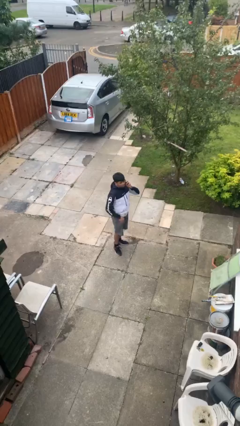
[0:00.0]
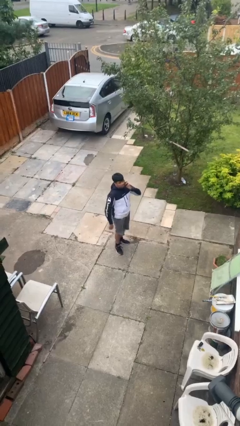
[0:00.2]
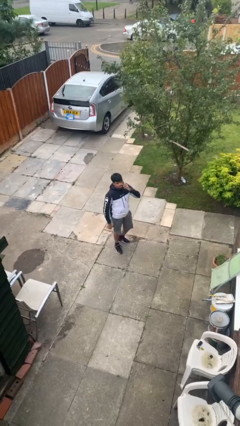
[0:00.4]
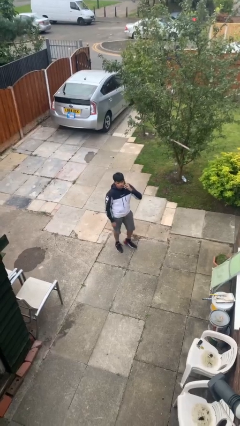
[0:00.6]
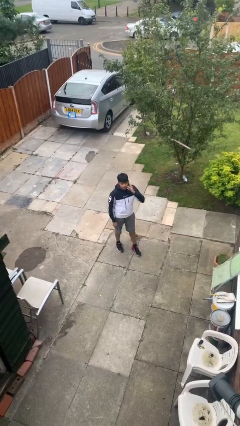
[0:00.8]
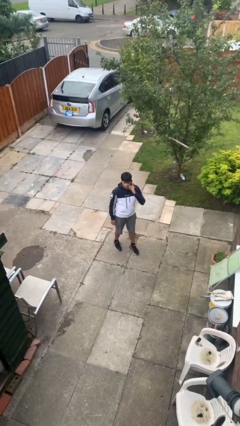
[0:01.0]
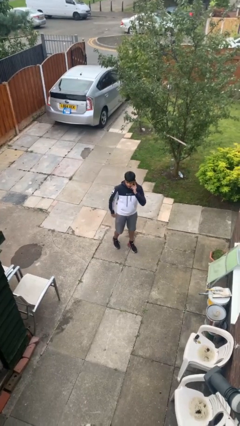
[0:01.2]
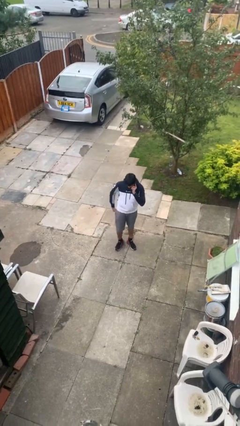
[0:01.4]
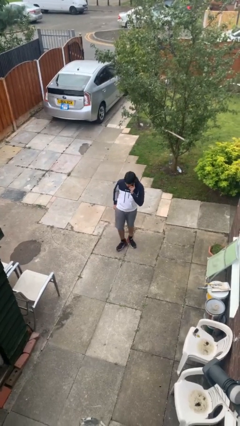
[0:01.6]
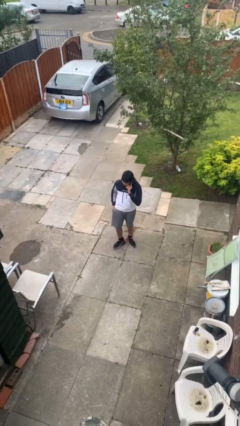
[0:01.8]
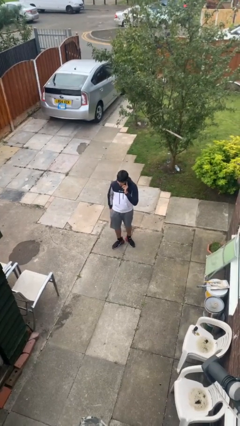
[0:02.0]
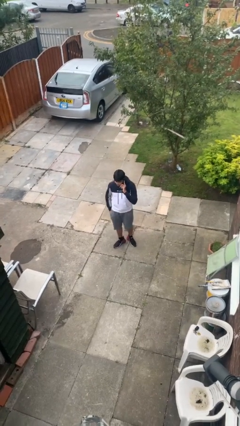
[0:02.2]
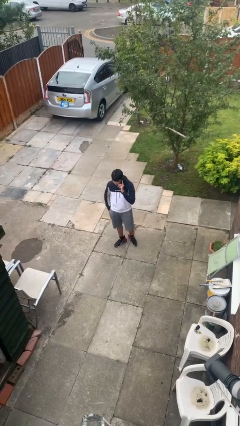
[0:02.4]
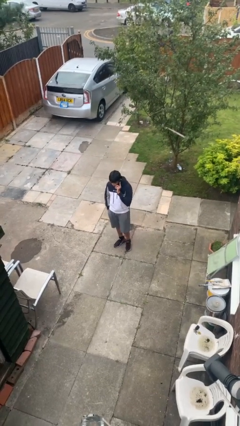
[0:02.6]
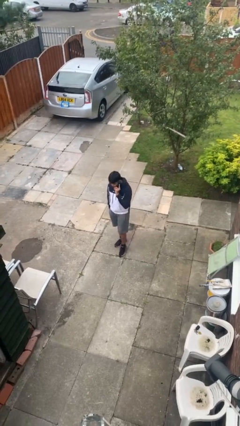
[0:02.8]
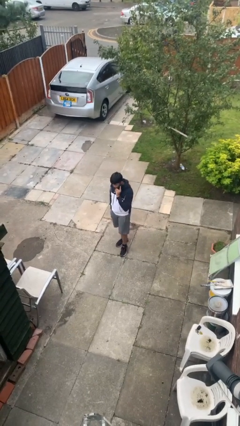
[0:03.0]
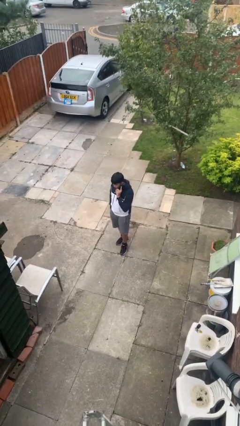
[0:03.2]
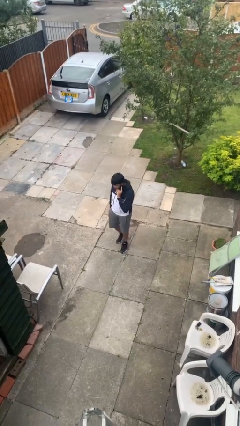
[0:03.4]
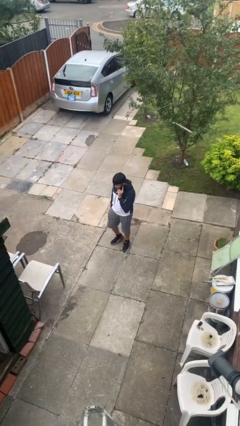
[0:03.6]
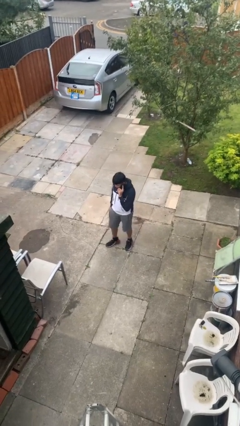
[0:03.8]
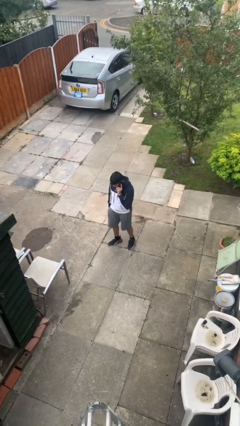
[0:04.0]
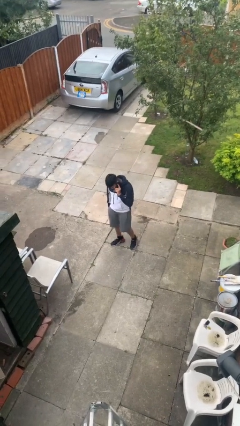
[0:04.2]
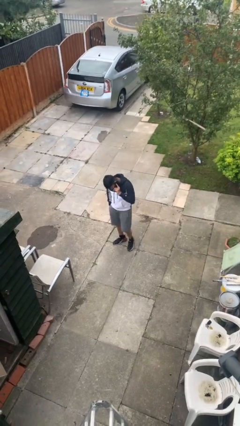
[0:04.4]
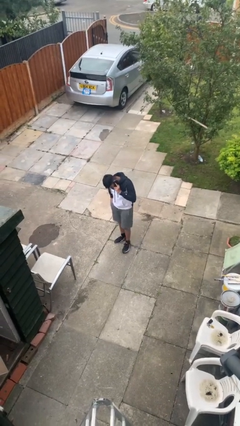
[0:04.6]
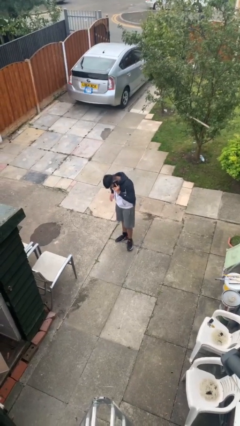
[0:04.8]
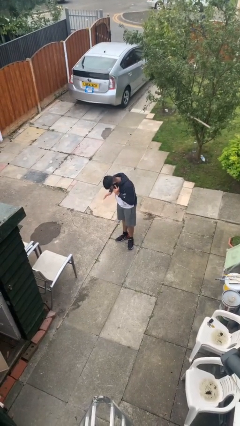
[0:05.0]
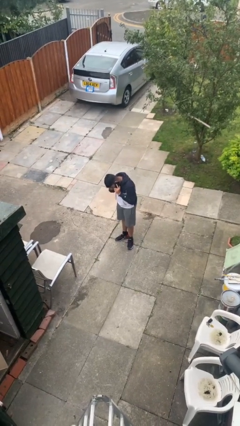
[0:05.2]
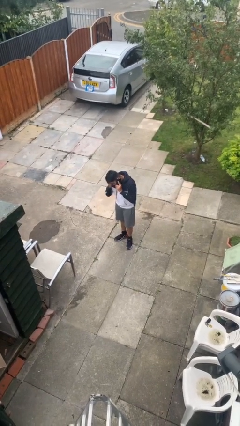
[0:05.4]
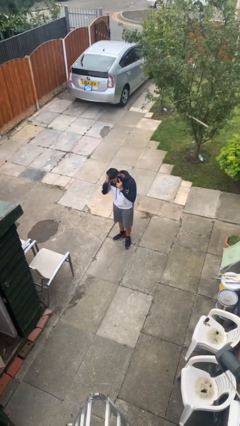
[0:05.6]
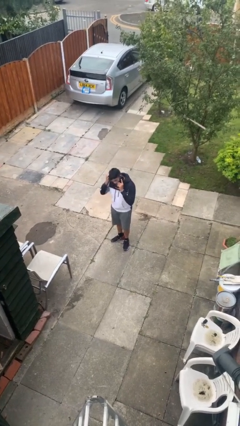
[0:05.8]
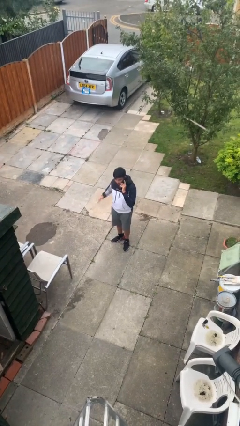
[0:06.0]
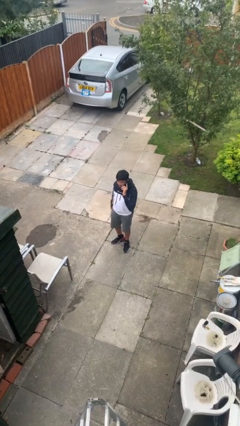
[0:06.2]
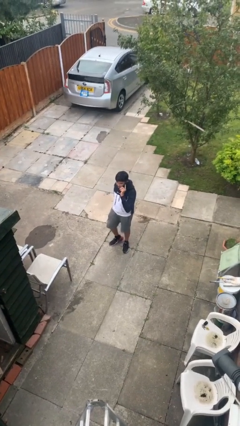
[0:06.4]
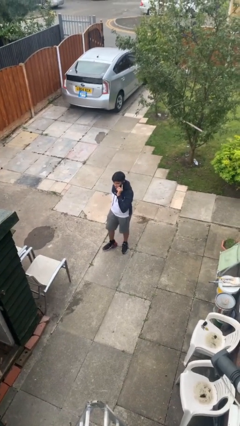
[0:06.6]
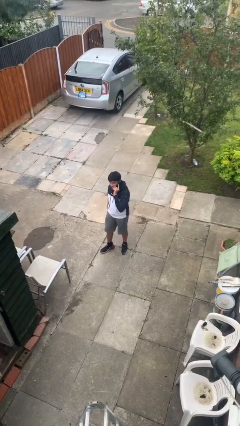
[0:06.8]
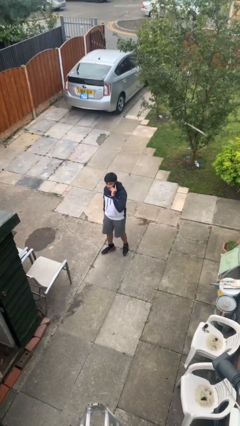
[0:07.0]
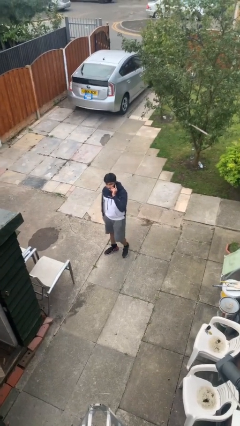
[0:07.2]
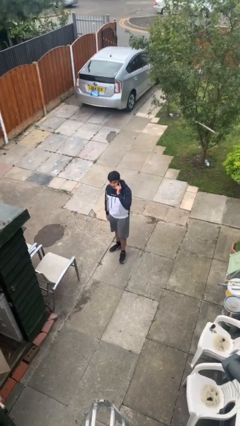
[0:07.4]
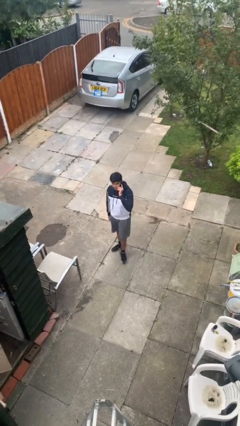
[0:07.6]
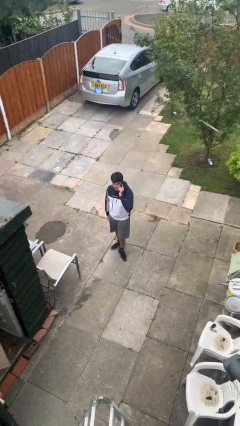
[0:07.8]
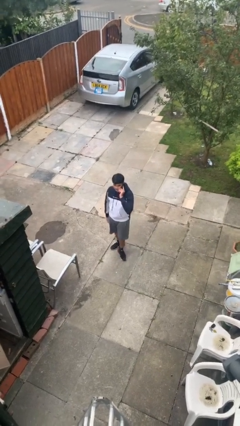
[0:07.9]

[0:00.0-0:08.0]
person talks on phone

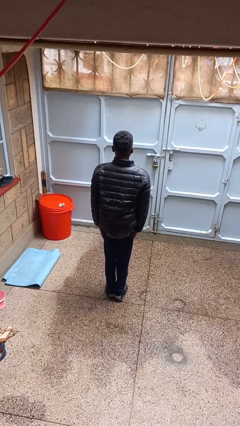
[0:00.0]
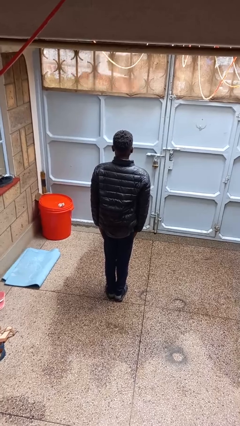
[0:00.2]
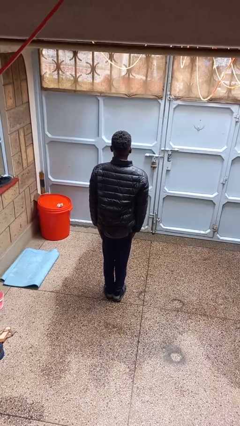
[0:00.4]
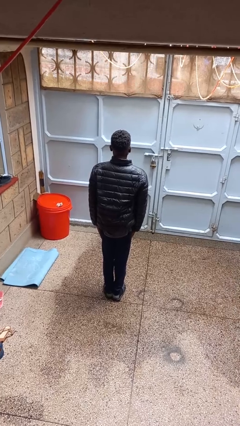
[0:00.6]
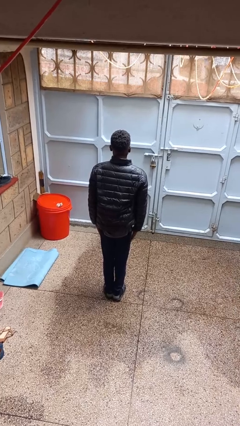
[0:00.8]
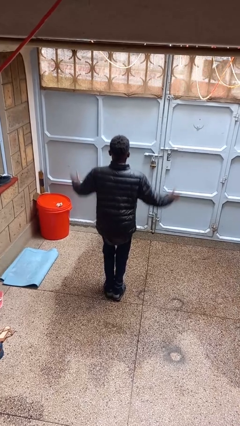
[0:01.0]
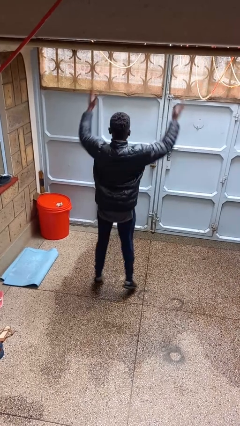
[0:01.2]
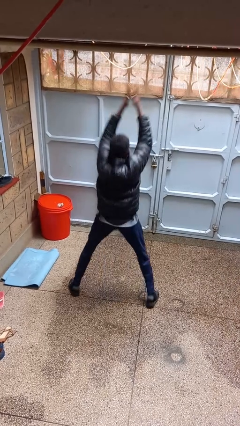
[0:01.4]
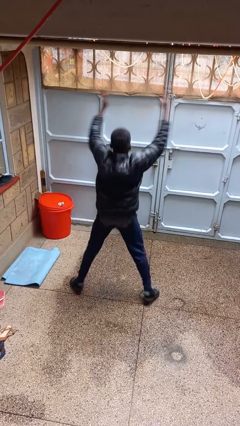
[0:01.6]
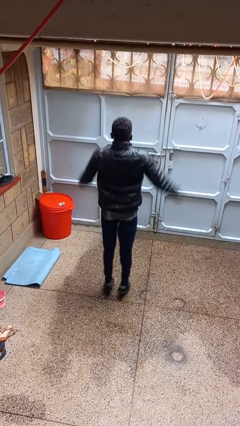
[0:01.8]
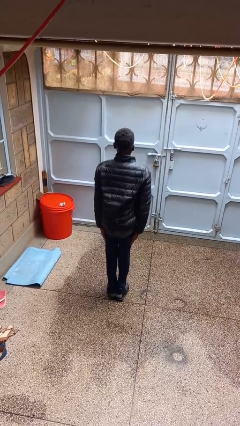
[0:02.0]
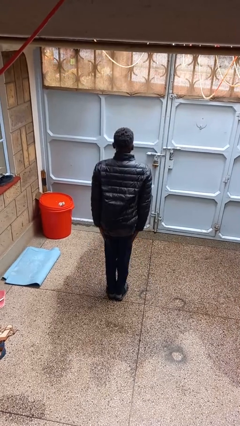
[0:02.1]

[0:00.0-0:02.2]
person exercises with jumping jacks

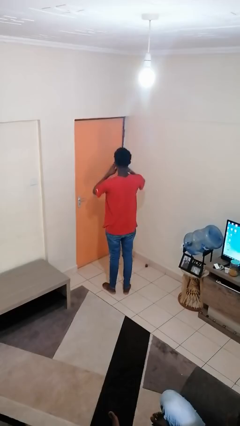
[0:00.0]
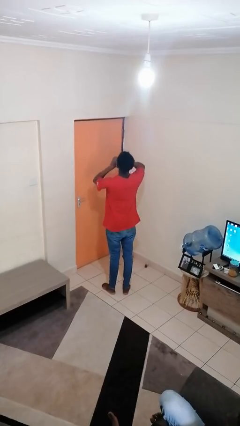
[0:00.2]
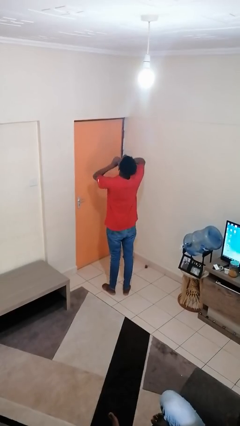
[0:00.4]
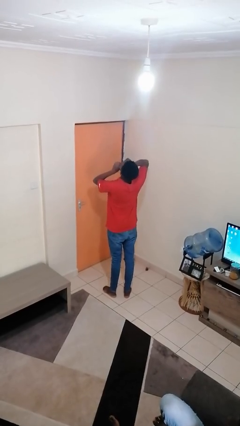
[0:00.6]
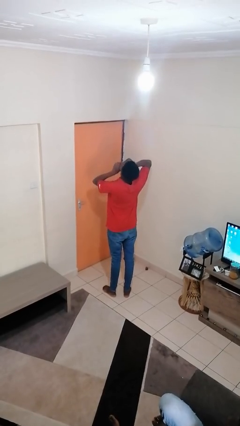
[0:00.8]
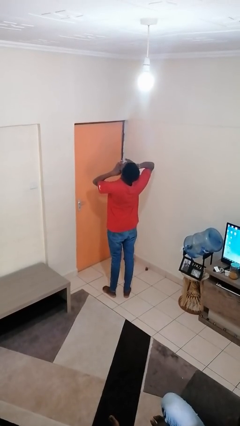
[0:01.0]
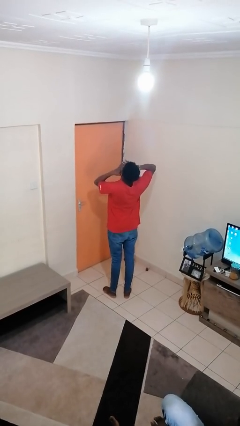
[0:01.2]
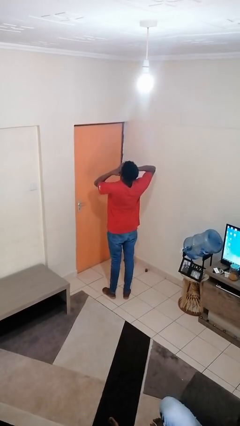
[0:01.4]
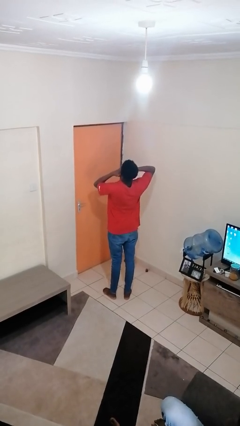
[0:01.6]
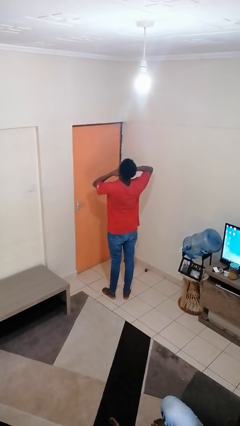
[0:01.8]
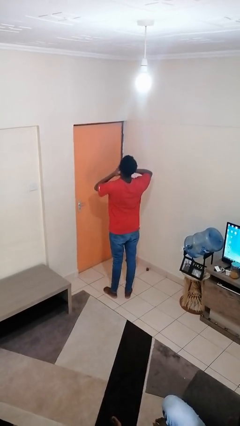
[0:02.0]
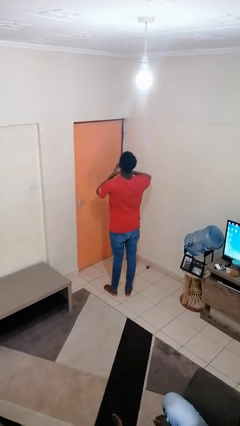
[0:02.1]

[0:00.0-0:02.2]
person yawns

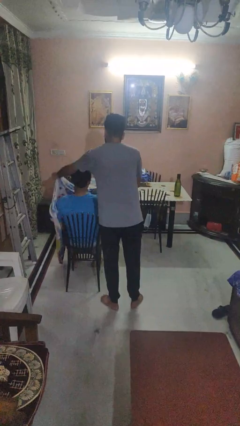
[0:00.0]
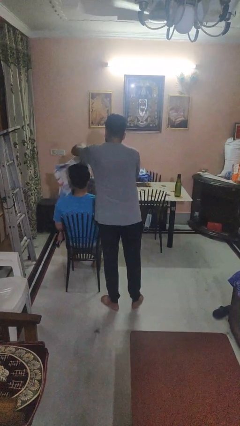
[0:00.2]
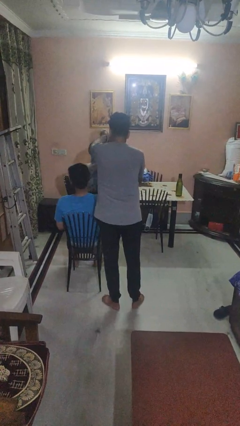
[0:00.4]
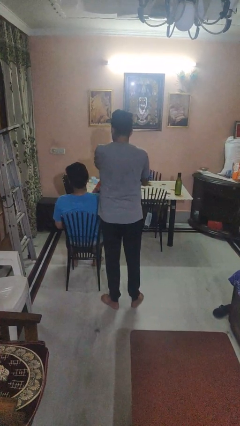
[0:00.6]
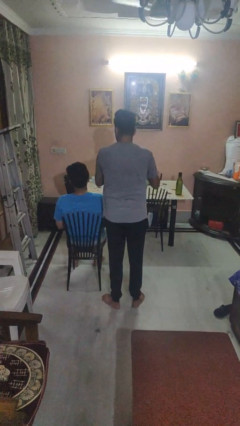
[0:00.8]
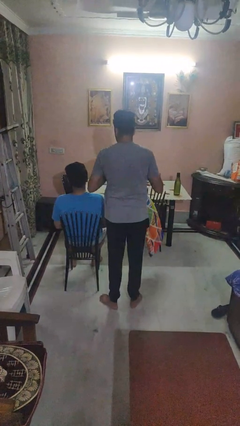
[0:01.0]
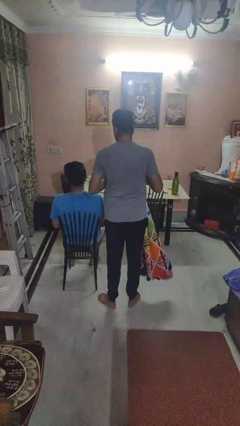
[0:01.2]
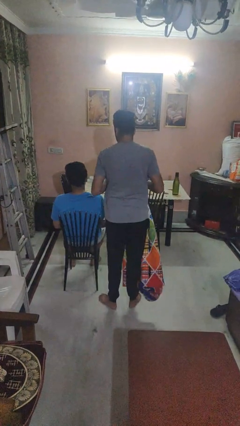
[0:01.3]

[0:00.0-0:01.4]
person uncovers friend with blanket

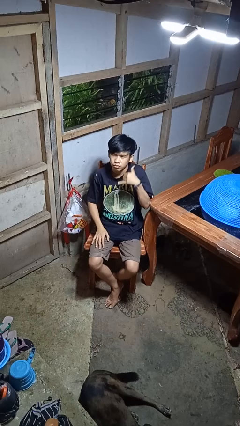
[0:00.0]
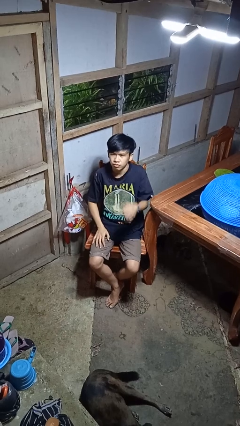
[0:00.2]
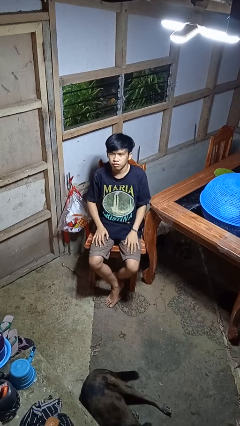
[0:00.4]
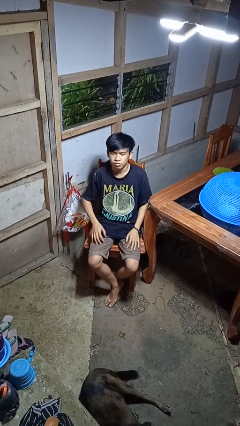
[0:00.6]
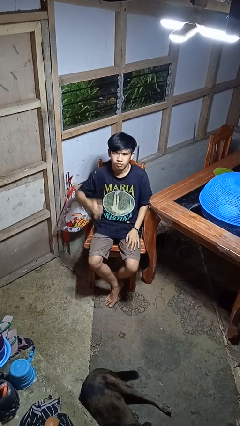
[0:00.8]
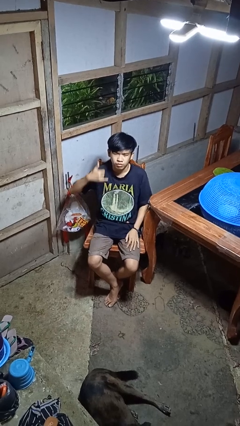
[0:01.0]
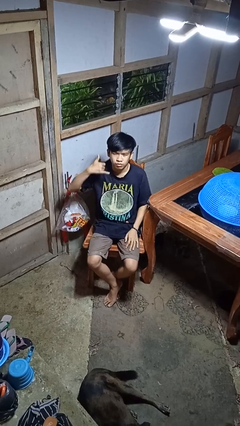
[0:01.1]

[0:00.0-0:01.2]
person gestures call me

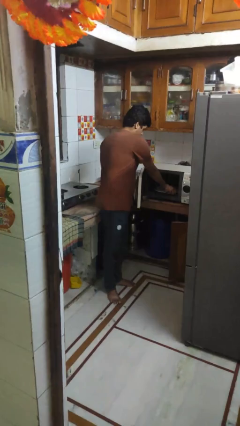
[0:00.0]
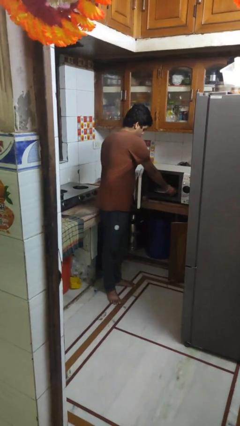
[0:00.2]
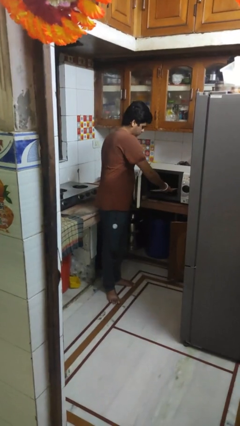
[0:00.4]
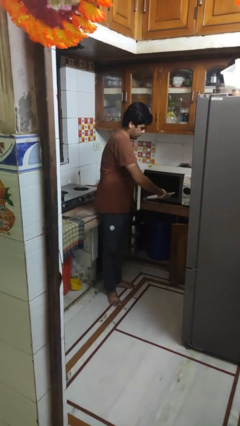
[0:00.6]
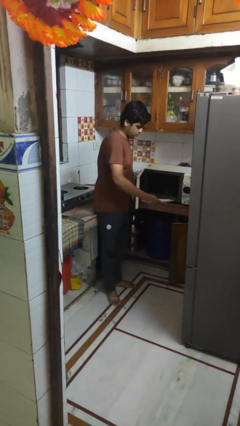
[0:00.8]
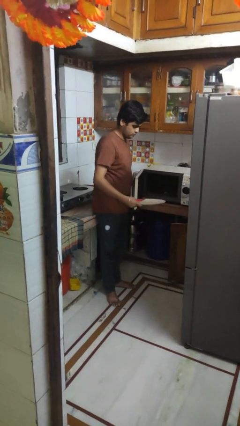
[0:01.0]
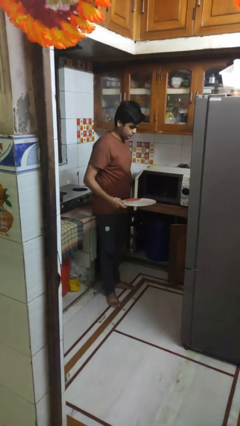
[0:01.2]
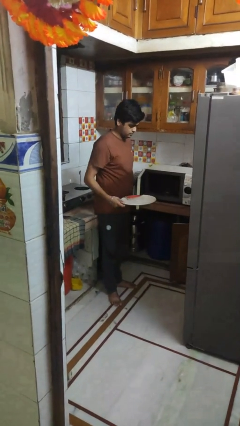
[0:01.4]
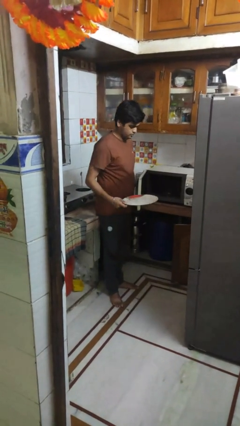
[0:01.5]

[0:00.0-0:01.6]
person takes object from microwave

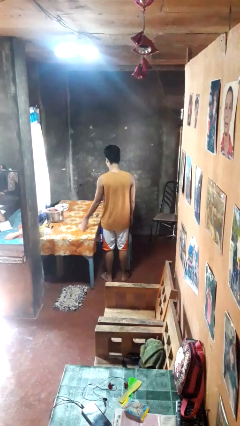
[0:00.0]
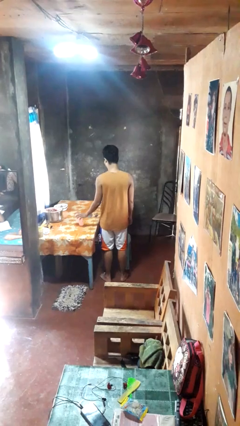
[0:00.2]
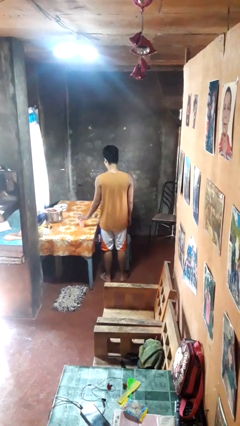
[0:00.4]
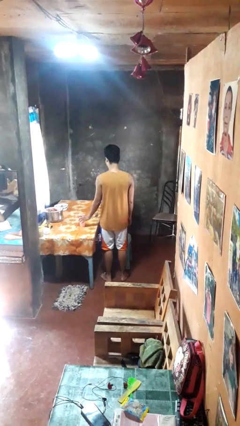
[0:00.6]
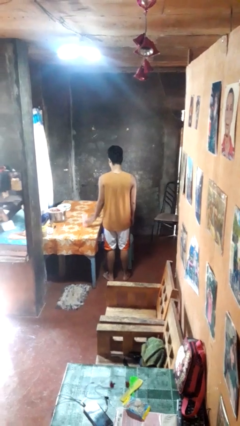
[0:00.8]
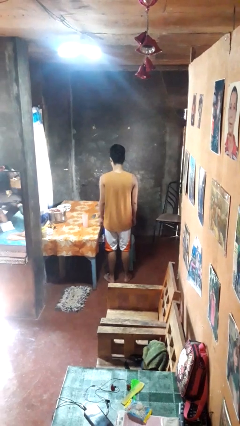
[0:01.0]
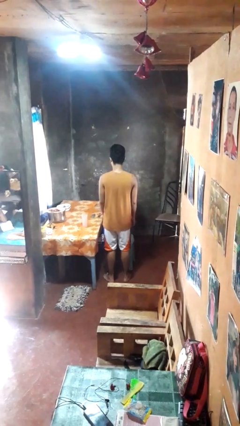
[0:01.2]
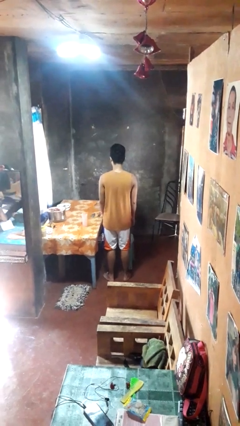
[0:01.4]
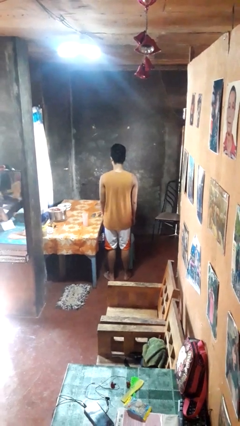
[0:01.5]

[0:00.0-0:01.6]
person sets upright glass
